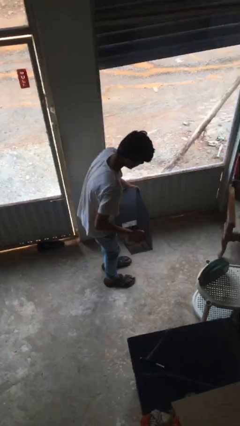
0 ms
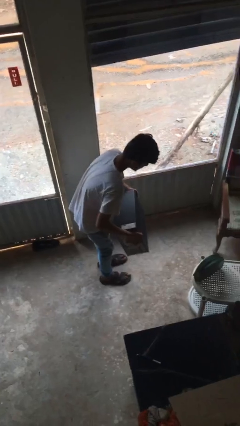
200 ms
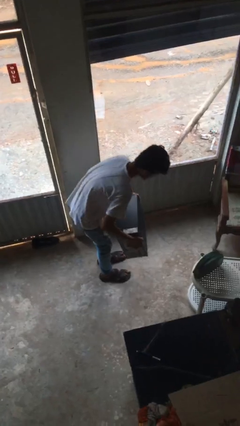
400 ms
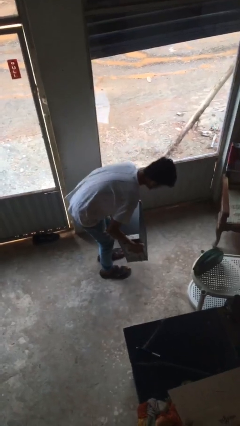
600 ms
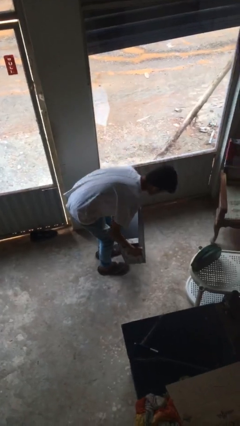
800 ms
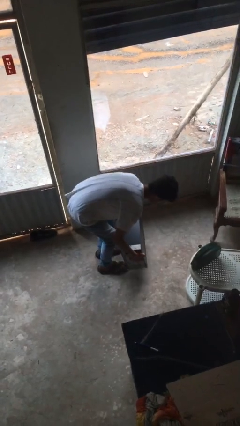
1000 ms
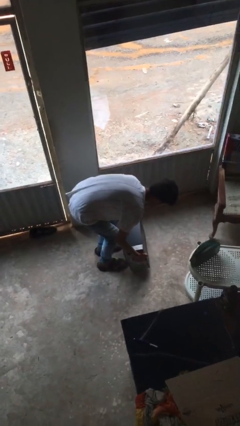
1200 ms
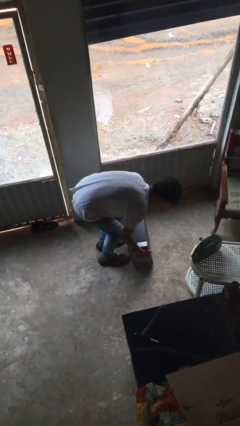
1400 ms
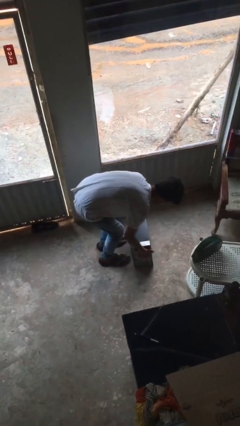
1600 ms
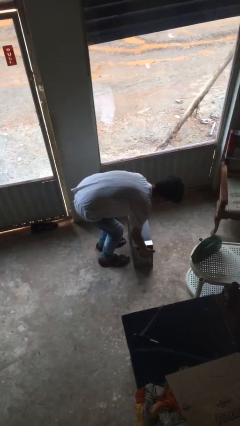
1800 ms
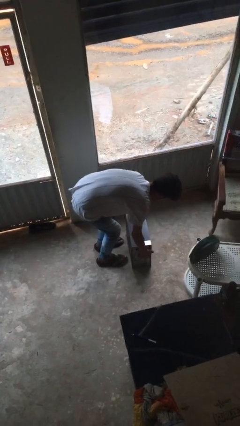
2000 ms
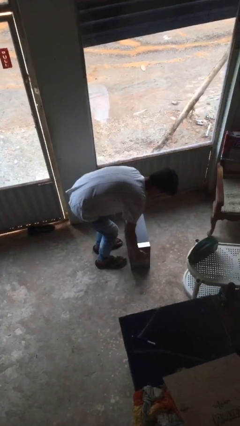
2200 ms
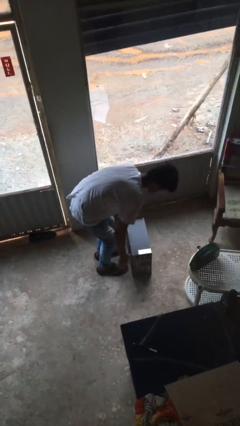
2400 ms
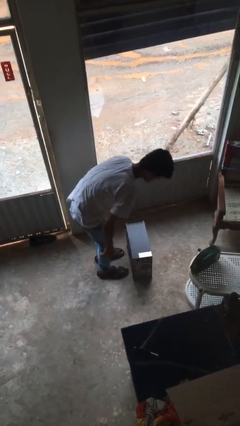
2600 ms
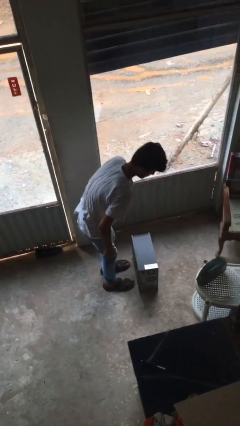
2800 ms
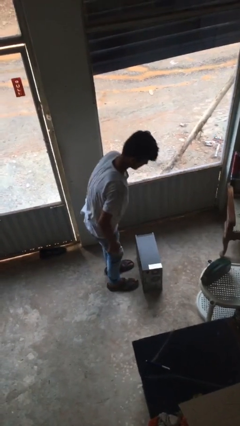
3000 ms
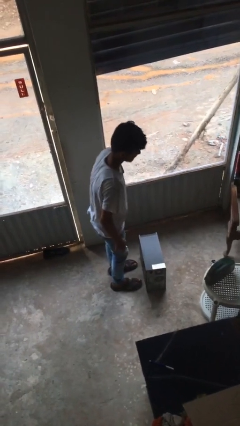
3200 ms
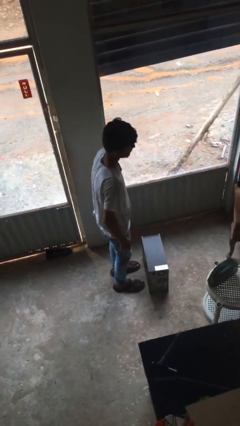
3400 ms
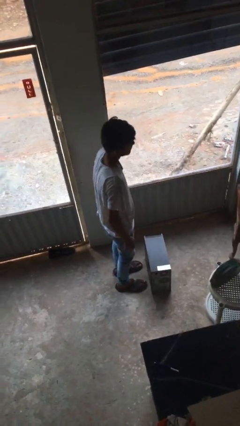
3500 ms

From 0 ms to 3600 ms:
person puts down object on floor

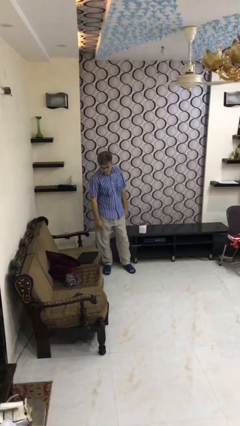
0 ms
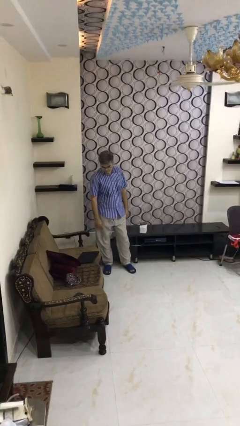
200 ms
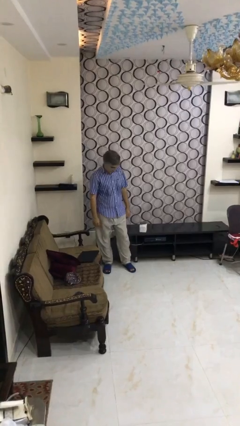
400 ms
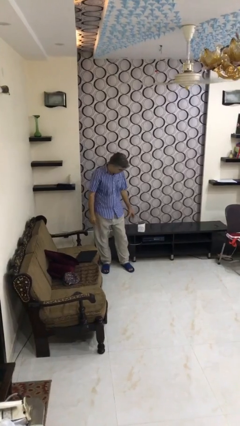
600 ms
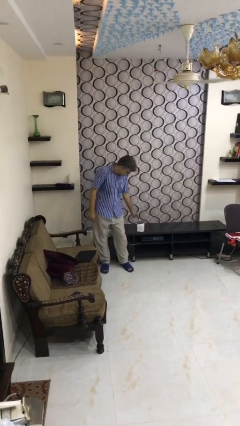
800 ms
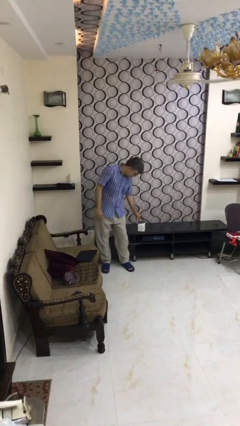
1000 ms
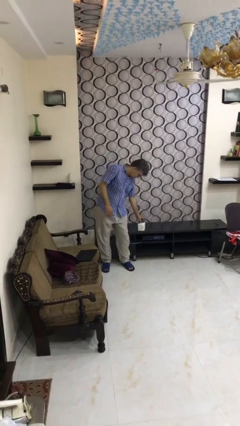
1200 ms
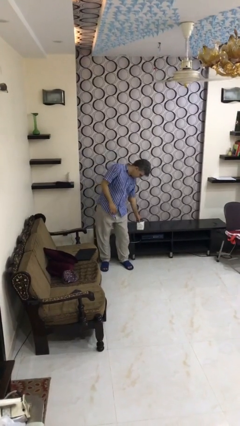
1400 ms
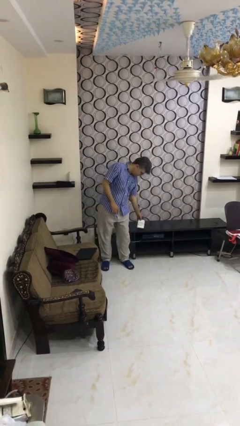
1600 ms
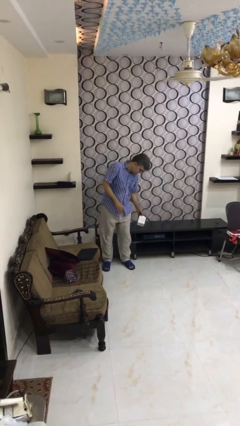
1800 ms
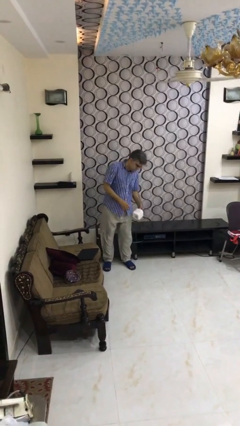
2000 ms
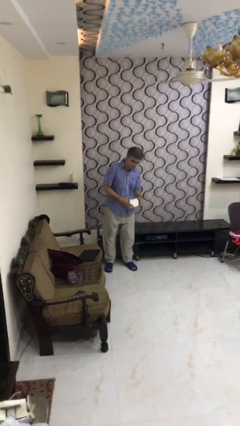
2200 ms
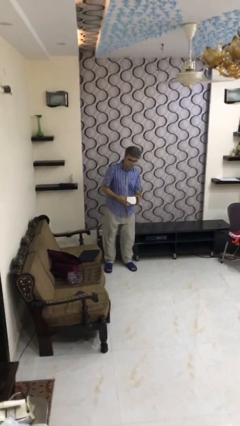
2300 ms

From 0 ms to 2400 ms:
person picks up object from table

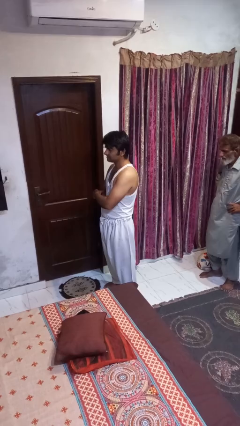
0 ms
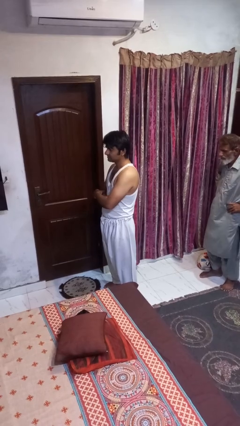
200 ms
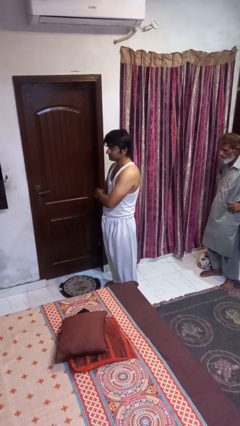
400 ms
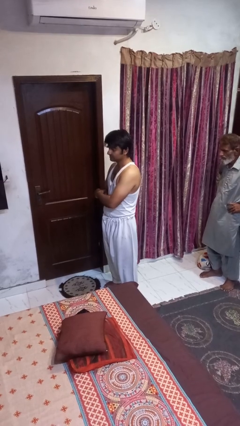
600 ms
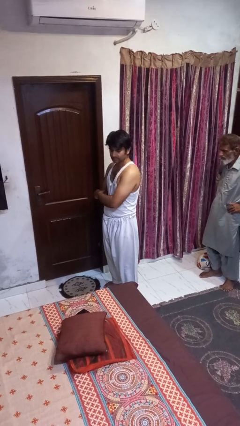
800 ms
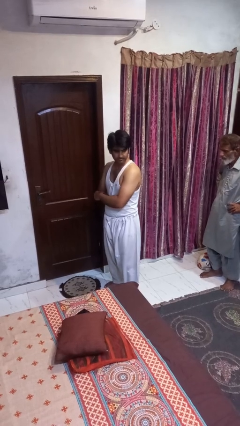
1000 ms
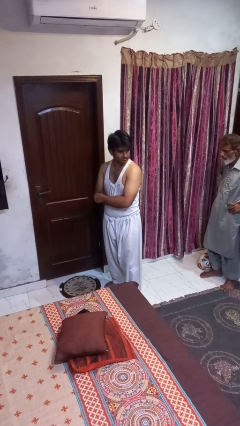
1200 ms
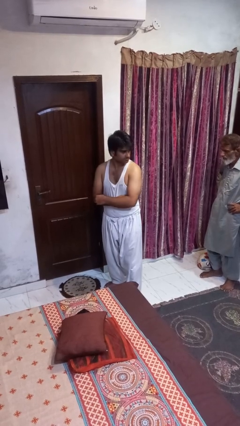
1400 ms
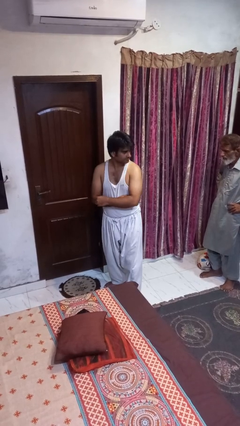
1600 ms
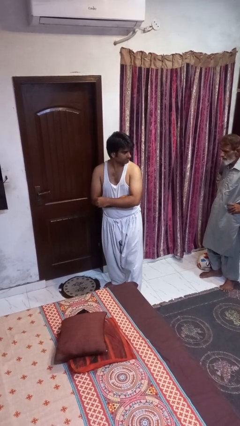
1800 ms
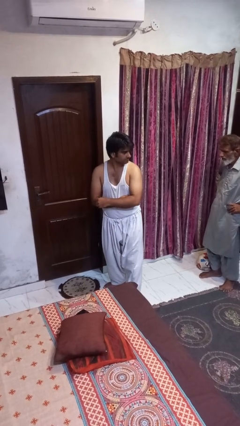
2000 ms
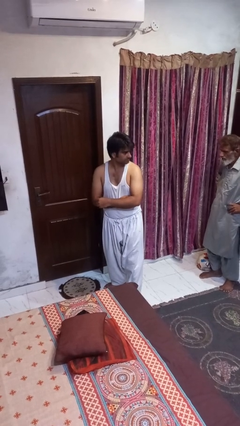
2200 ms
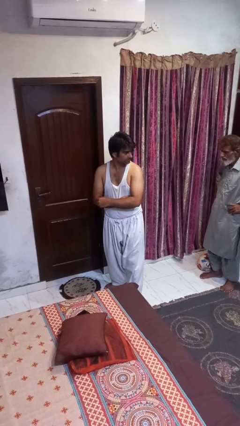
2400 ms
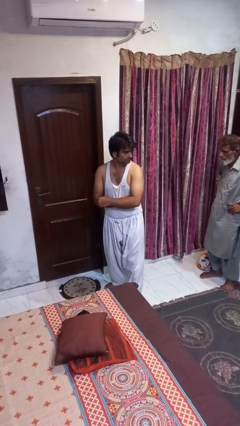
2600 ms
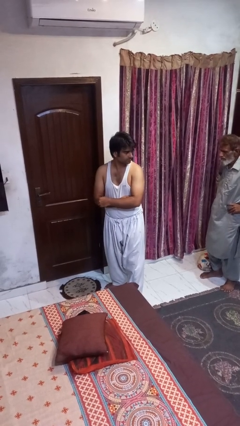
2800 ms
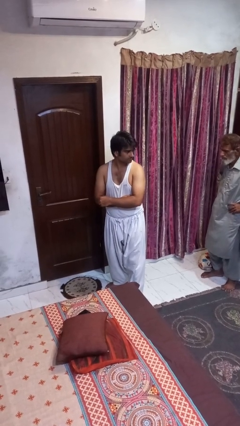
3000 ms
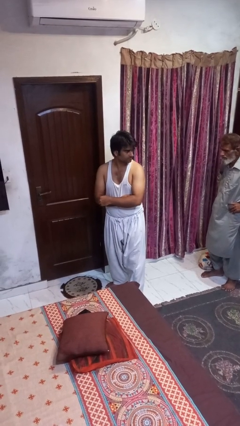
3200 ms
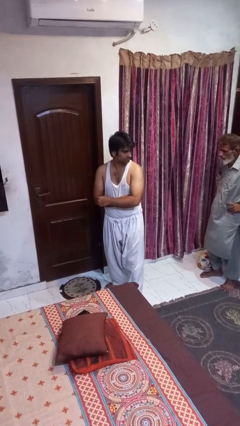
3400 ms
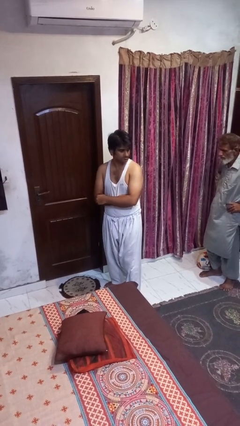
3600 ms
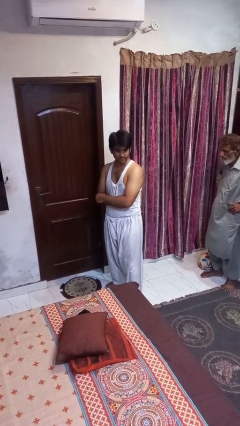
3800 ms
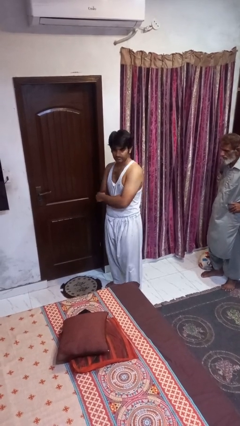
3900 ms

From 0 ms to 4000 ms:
person looks over shoulder

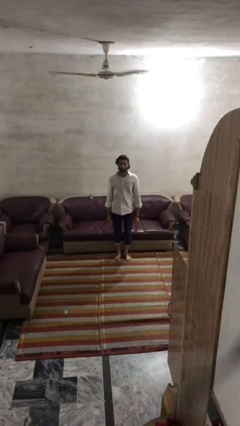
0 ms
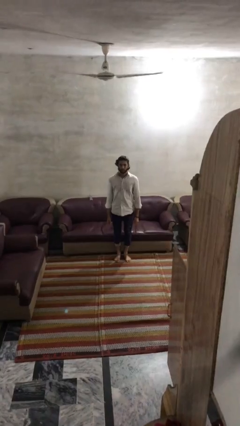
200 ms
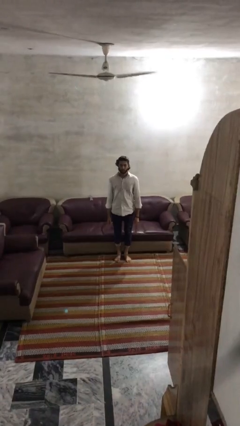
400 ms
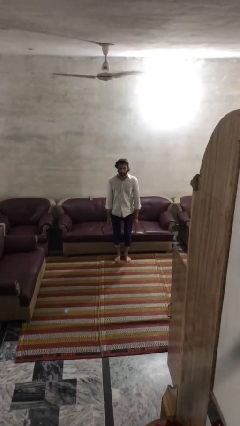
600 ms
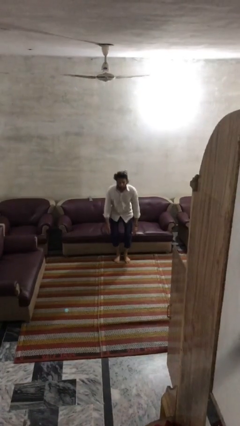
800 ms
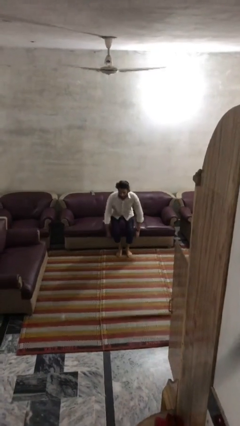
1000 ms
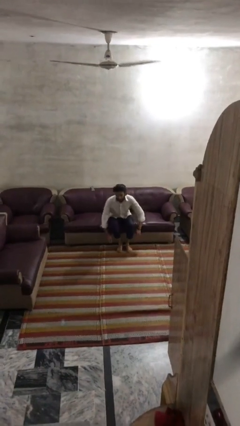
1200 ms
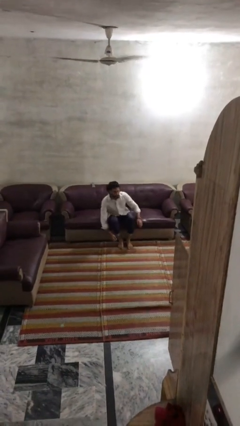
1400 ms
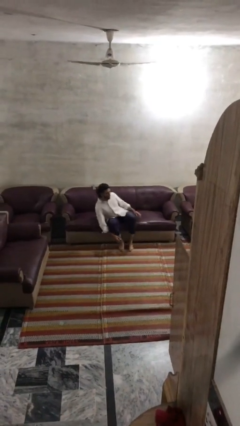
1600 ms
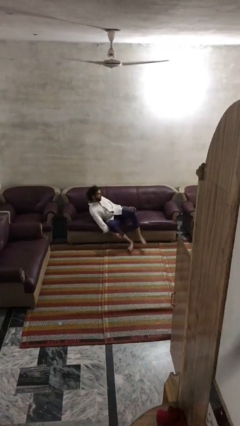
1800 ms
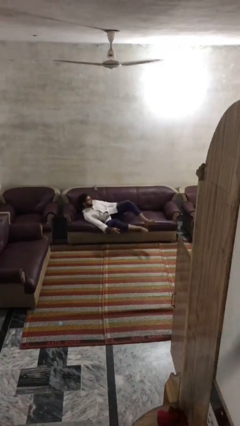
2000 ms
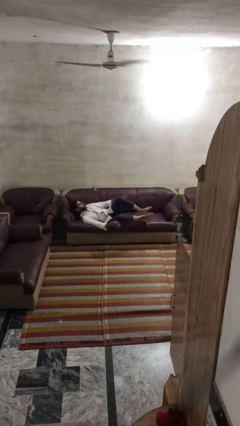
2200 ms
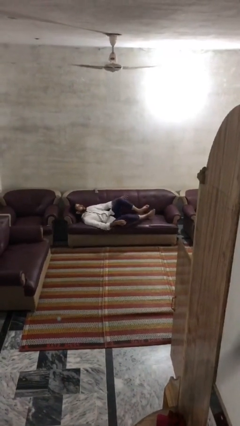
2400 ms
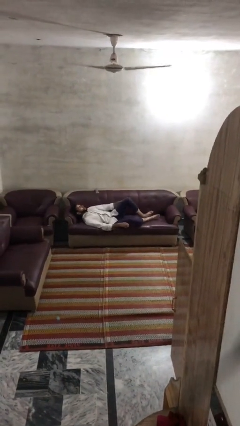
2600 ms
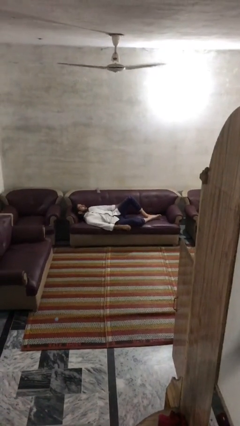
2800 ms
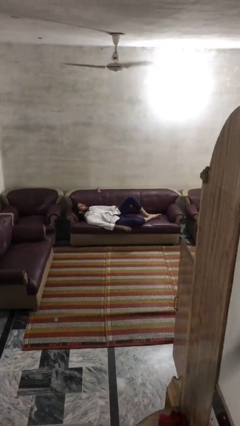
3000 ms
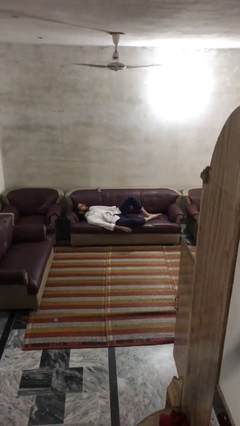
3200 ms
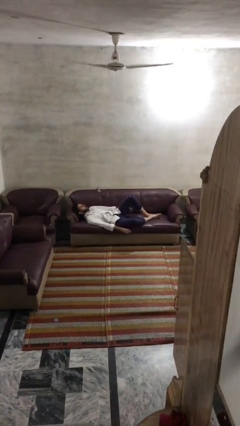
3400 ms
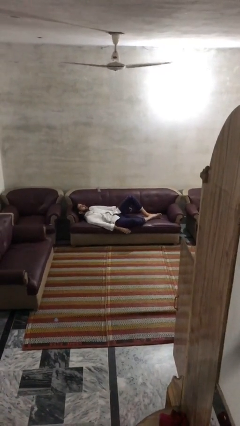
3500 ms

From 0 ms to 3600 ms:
person lies down on couch

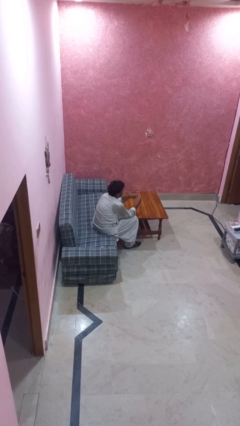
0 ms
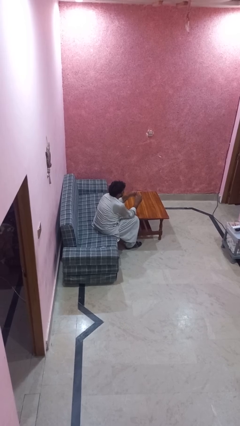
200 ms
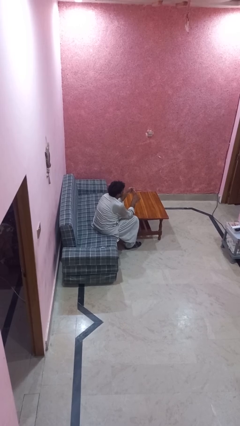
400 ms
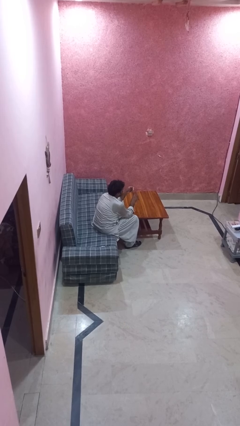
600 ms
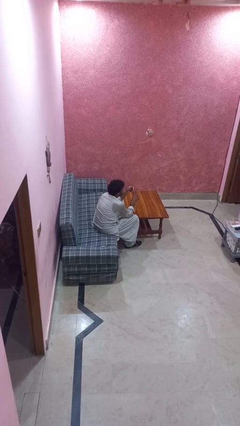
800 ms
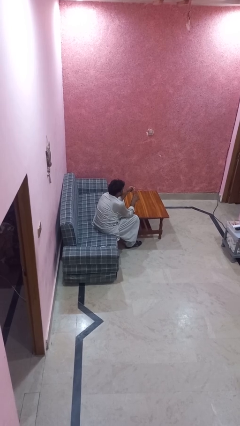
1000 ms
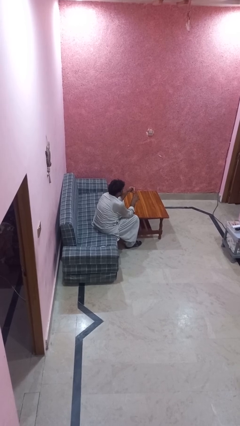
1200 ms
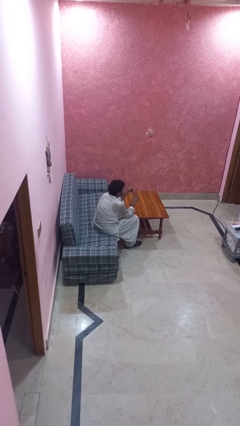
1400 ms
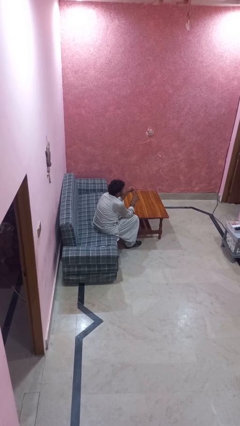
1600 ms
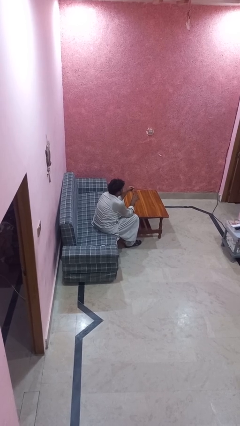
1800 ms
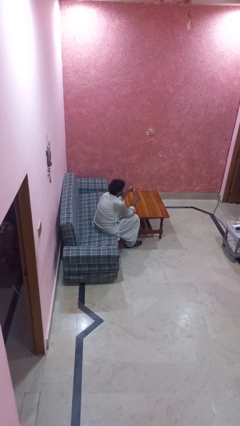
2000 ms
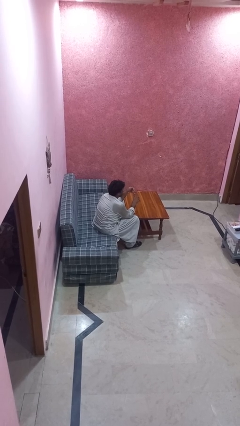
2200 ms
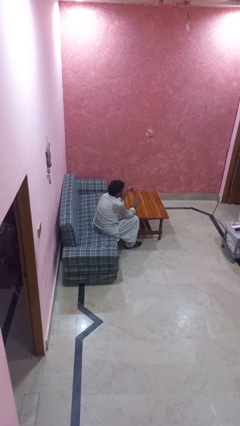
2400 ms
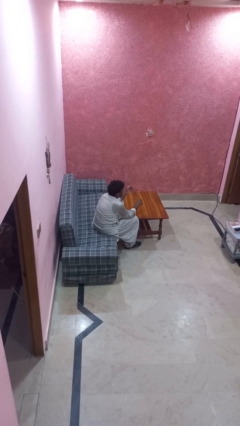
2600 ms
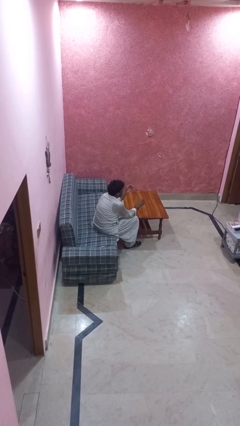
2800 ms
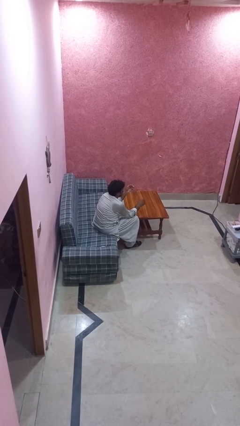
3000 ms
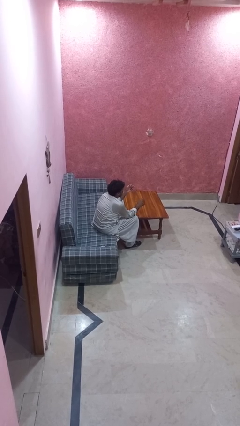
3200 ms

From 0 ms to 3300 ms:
person clips fingernails

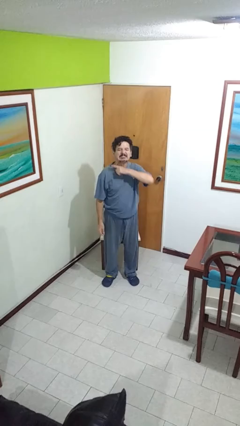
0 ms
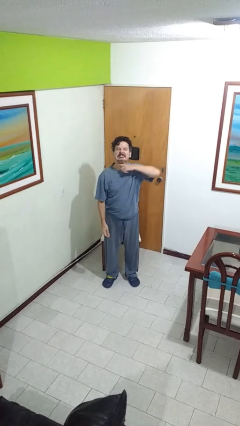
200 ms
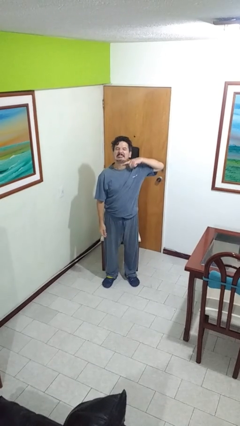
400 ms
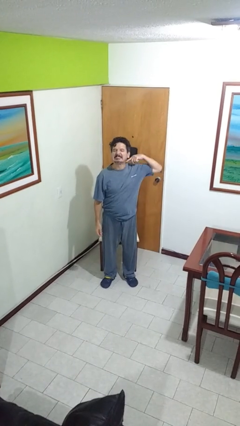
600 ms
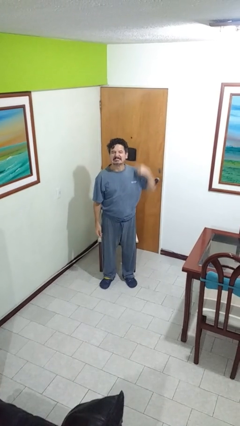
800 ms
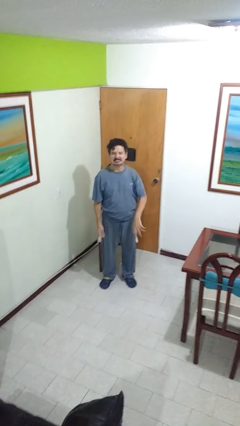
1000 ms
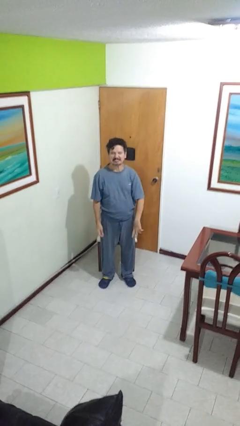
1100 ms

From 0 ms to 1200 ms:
person gestures cut
